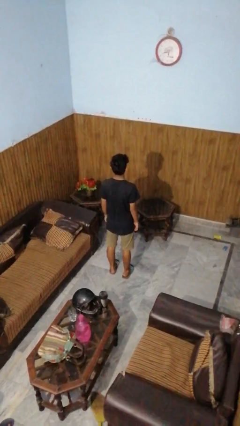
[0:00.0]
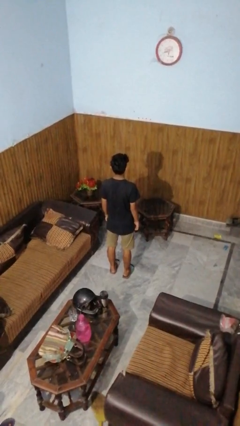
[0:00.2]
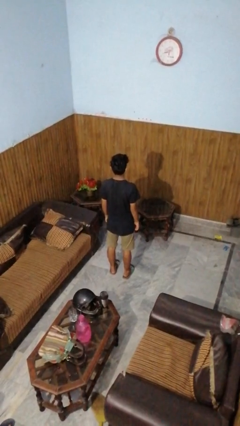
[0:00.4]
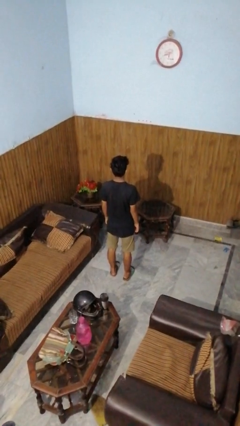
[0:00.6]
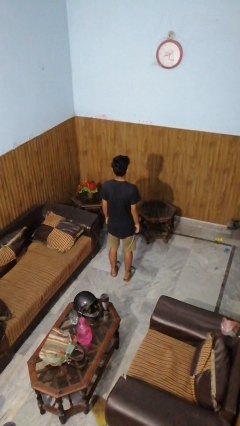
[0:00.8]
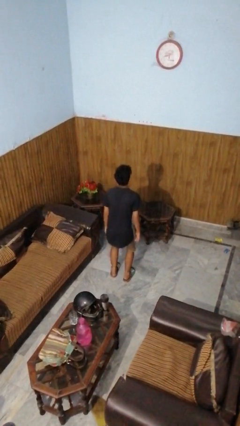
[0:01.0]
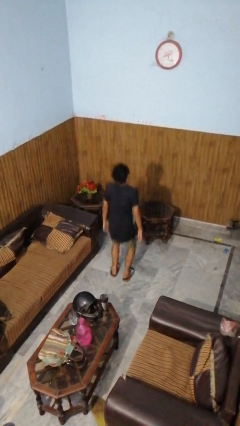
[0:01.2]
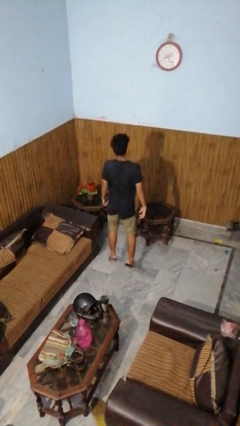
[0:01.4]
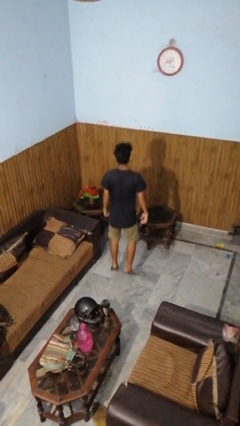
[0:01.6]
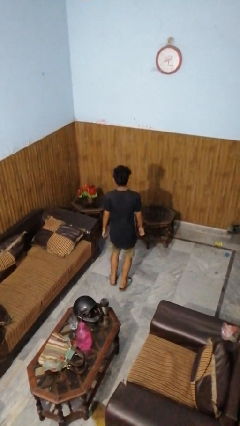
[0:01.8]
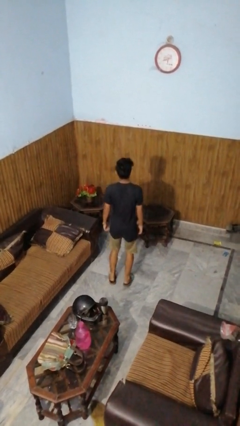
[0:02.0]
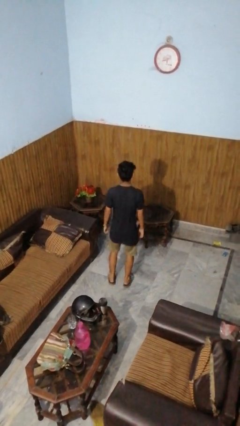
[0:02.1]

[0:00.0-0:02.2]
person jumps

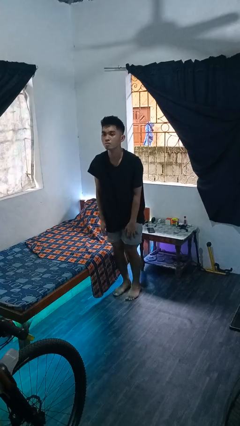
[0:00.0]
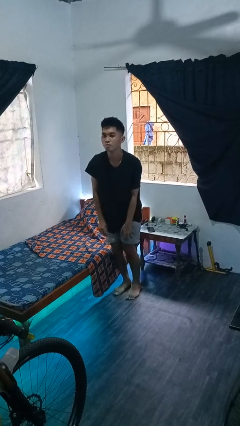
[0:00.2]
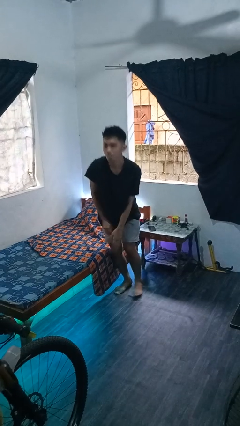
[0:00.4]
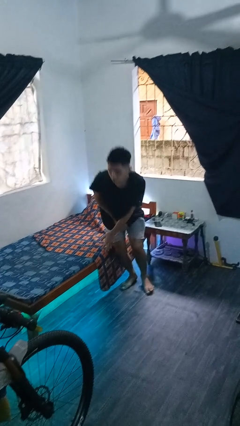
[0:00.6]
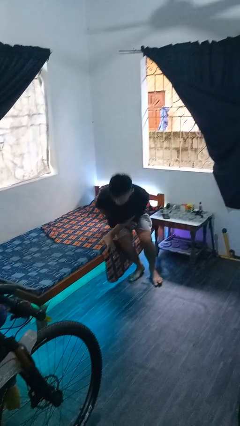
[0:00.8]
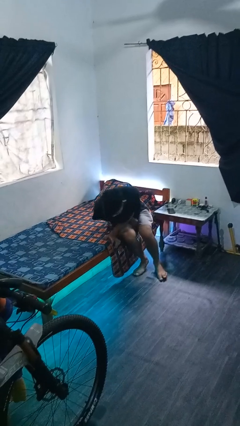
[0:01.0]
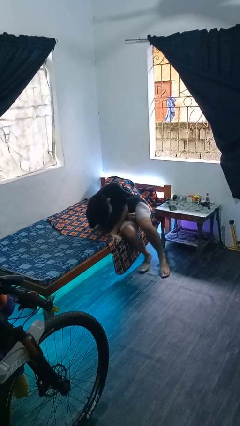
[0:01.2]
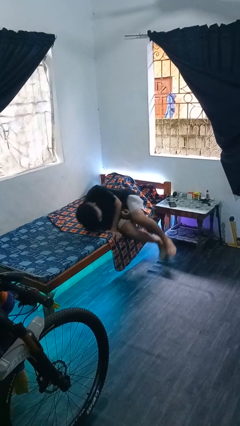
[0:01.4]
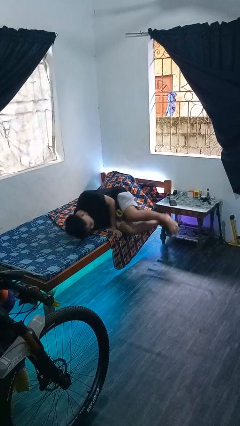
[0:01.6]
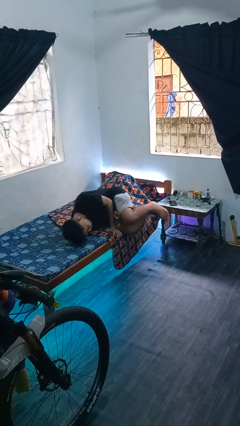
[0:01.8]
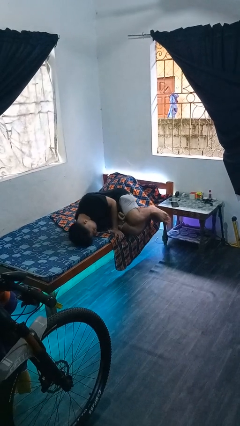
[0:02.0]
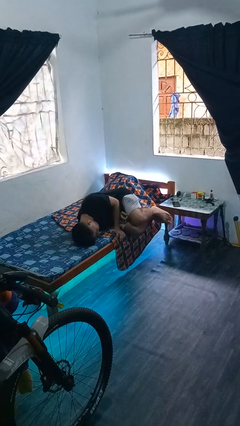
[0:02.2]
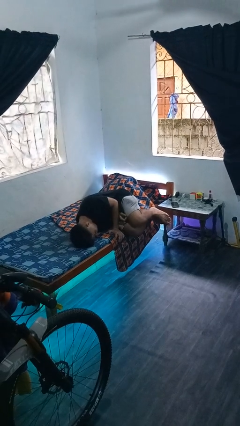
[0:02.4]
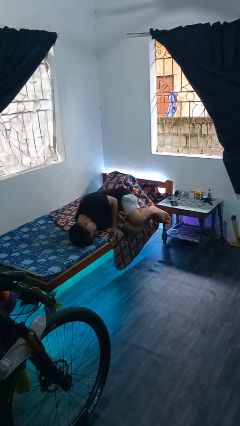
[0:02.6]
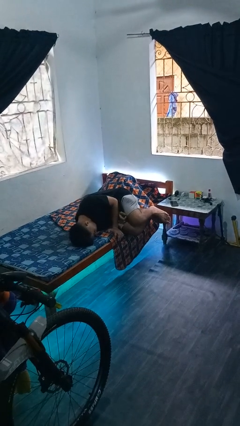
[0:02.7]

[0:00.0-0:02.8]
person lies down on bed

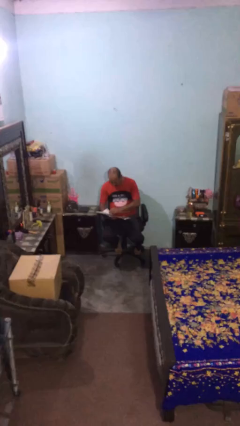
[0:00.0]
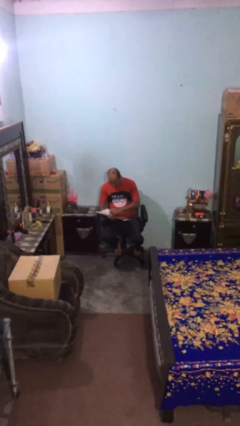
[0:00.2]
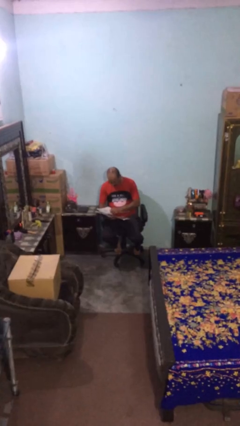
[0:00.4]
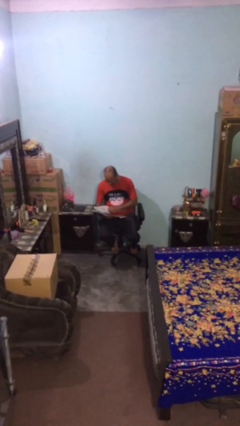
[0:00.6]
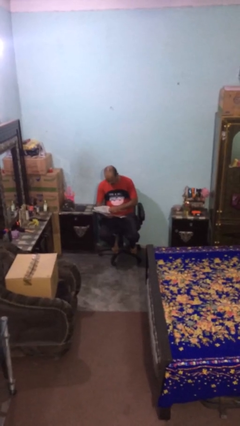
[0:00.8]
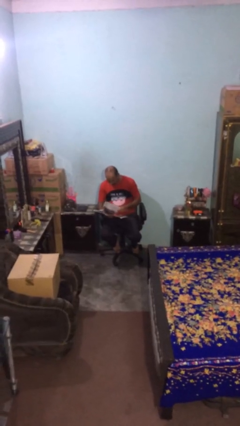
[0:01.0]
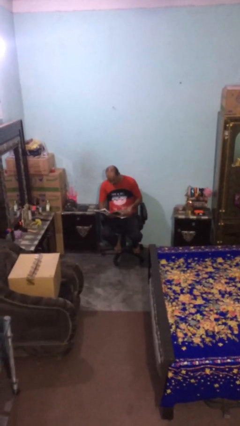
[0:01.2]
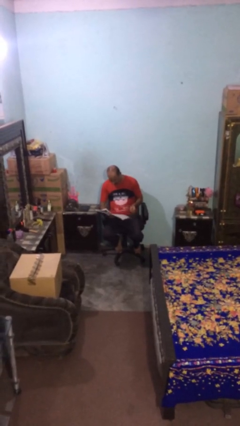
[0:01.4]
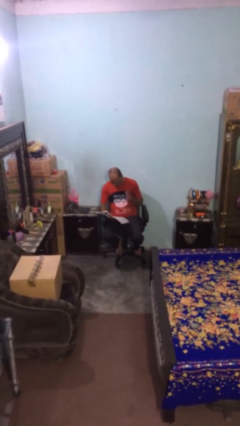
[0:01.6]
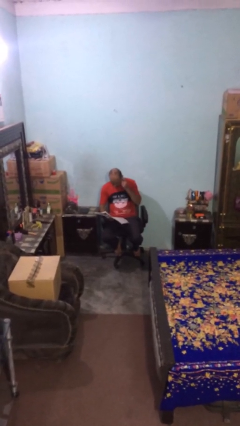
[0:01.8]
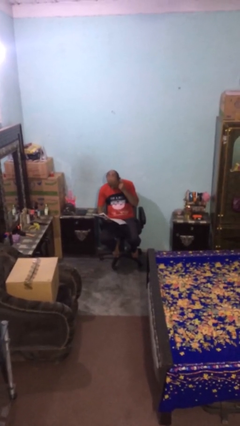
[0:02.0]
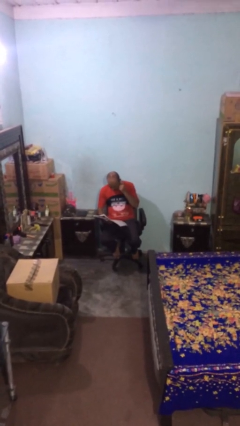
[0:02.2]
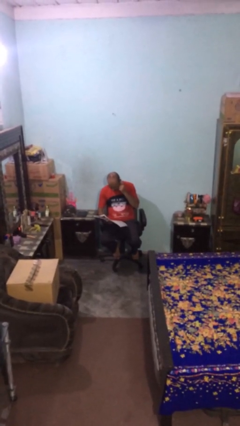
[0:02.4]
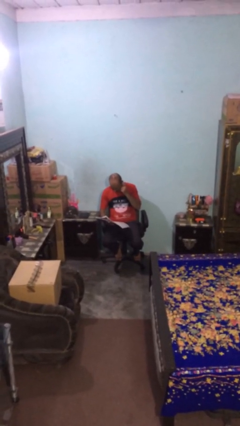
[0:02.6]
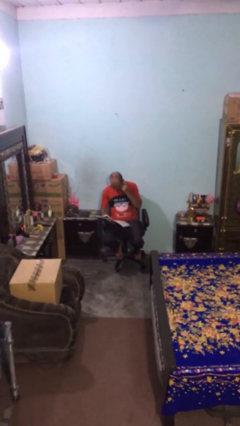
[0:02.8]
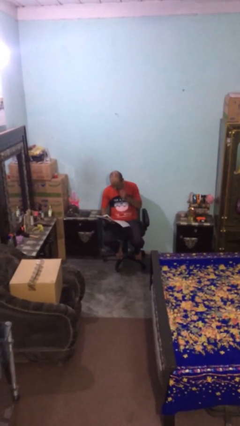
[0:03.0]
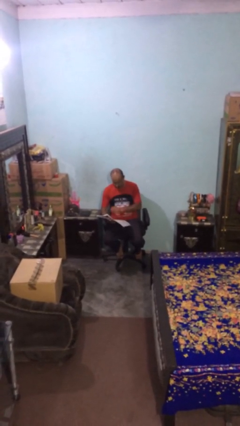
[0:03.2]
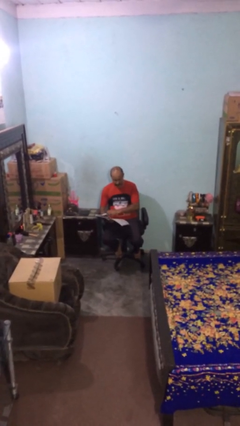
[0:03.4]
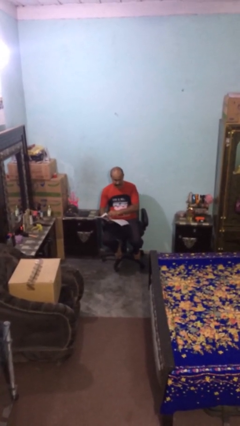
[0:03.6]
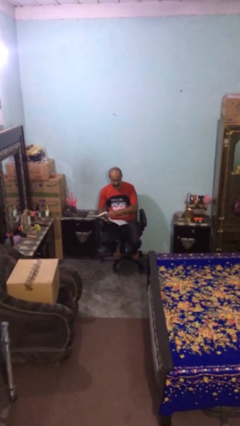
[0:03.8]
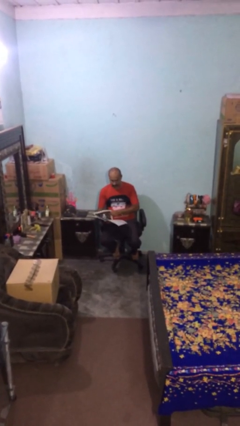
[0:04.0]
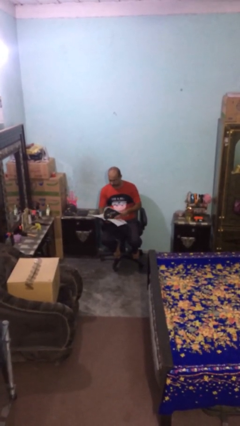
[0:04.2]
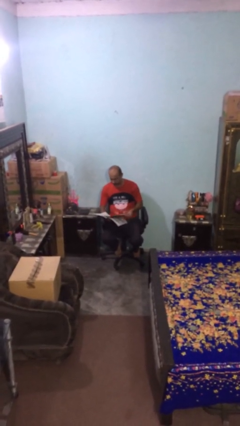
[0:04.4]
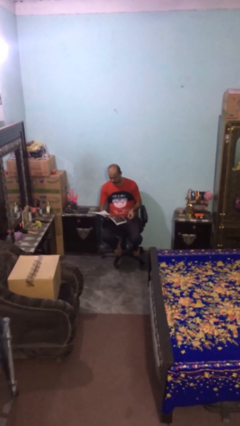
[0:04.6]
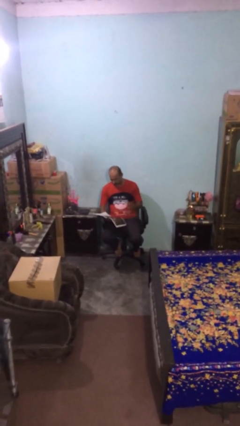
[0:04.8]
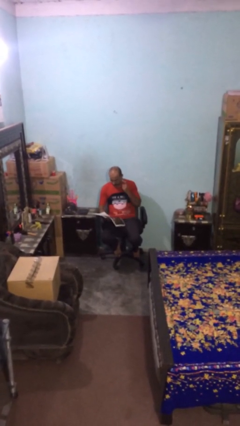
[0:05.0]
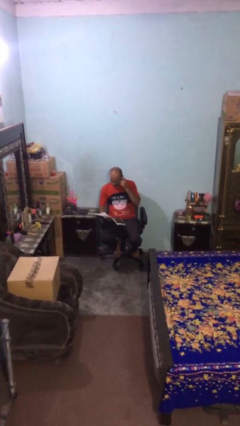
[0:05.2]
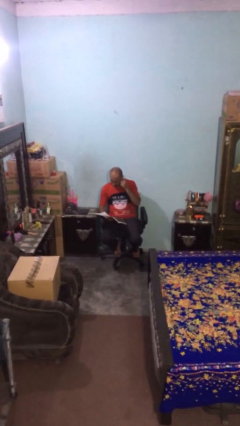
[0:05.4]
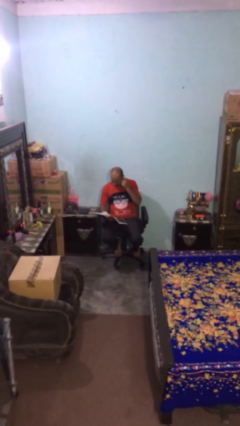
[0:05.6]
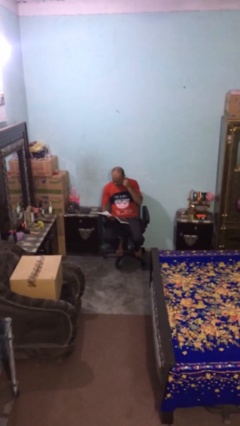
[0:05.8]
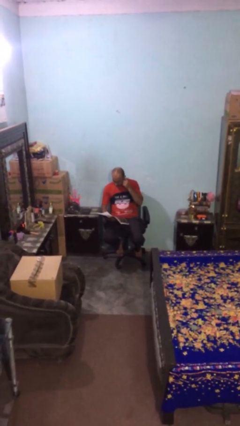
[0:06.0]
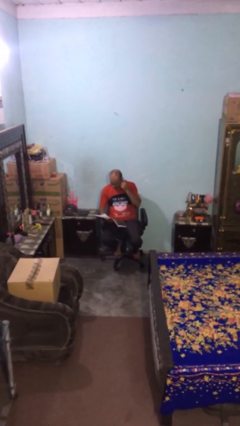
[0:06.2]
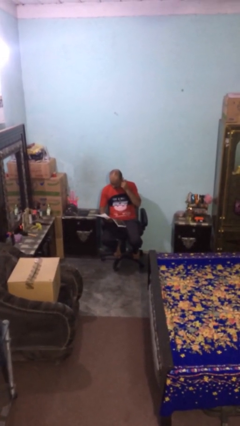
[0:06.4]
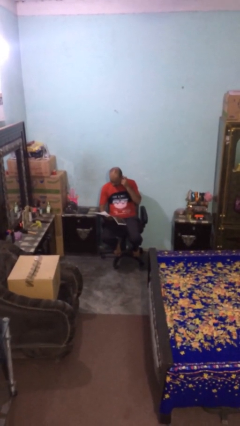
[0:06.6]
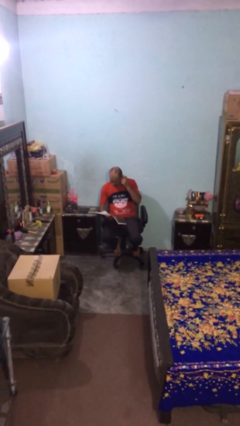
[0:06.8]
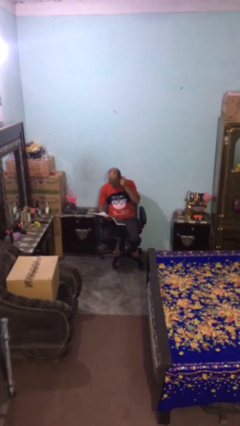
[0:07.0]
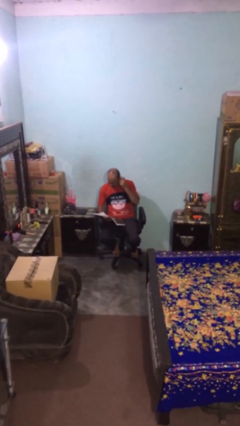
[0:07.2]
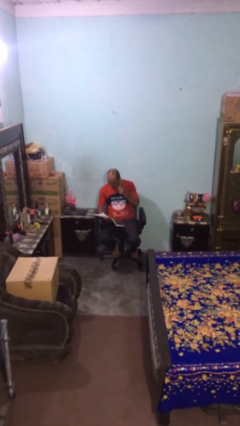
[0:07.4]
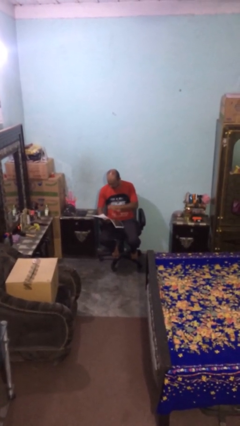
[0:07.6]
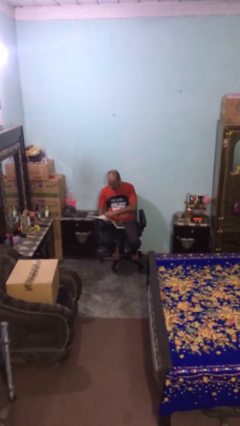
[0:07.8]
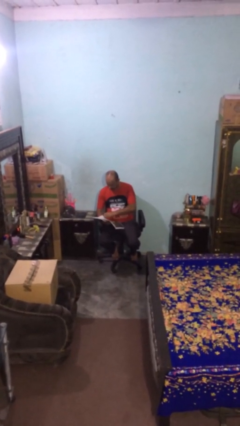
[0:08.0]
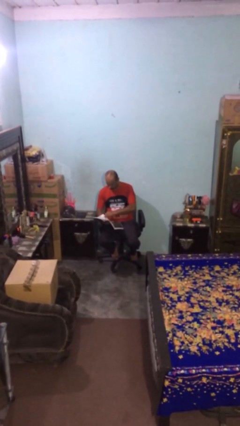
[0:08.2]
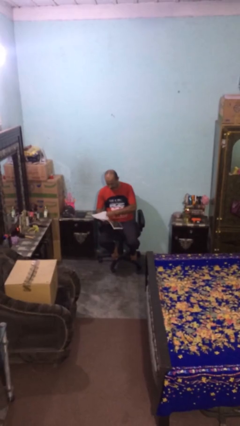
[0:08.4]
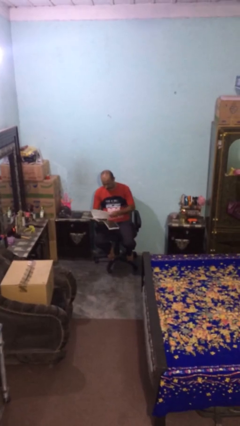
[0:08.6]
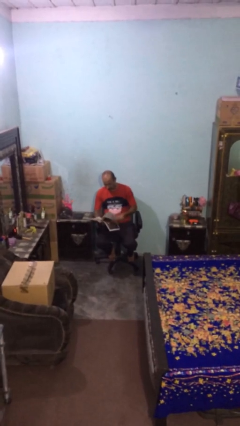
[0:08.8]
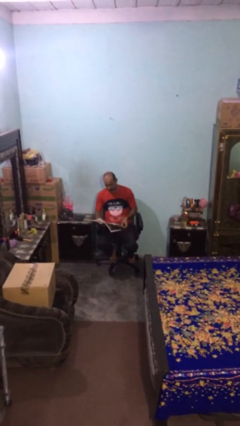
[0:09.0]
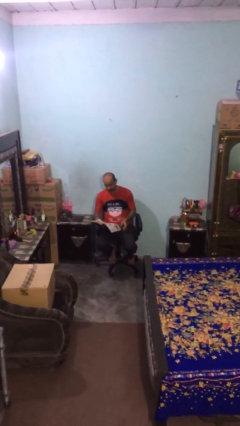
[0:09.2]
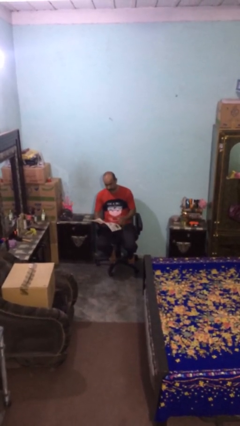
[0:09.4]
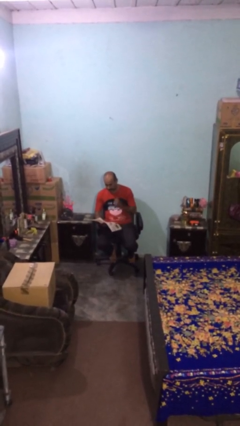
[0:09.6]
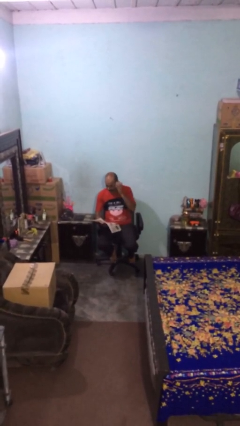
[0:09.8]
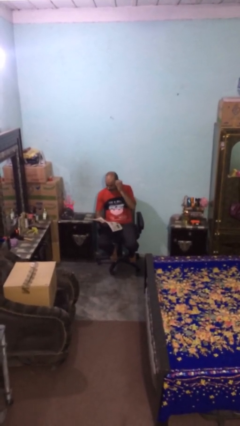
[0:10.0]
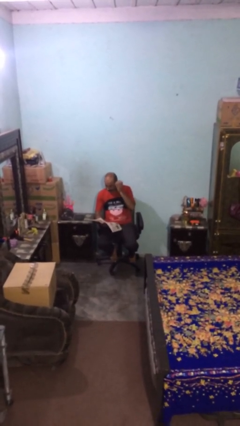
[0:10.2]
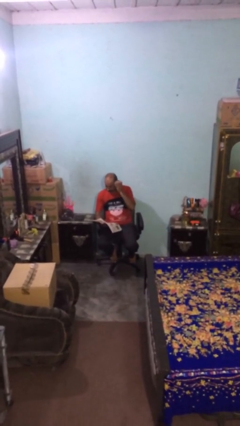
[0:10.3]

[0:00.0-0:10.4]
person reads document

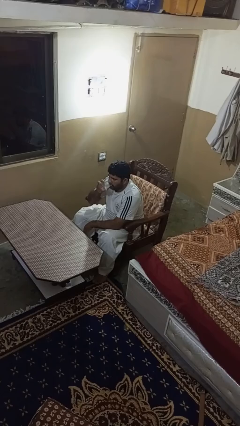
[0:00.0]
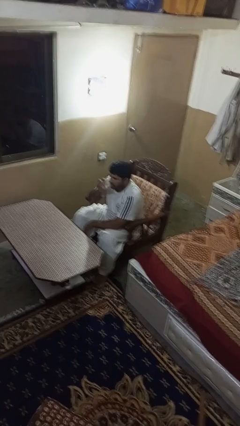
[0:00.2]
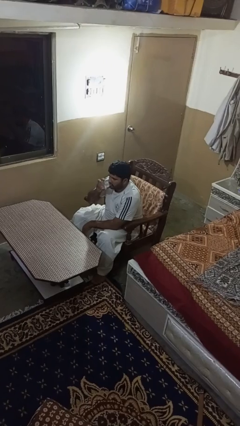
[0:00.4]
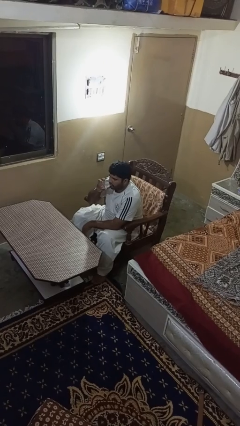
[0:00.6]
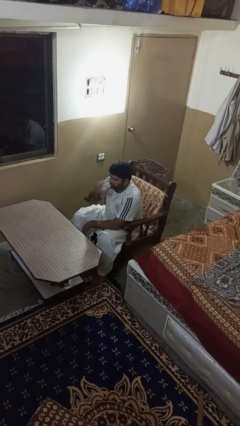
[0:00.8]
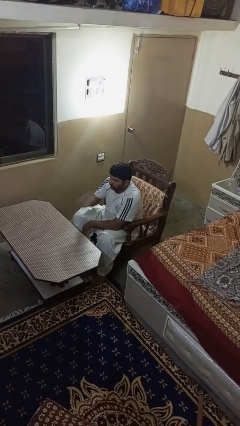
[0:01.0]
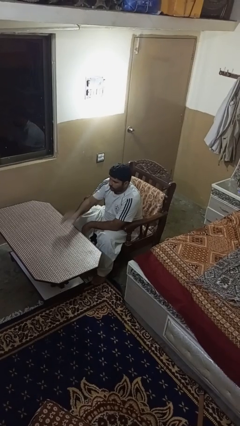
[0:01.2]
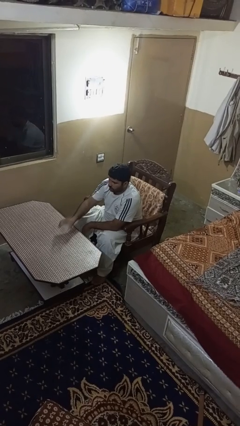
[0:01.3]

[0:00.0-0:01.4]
person puts down object on table

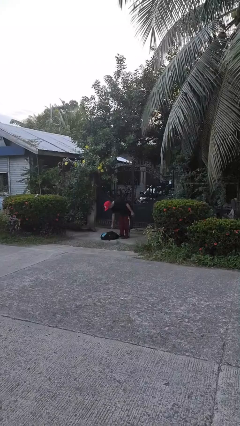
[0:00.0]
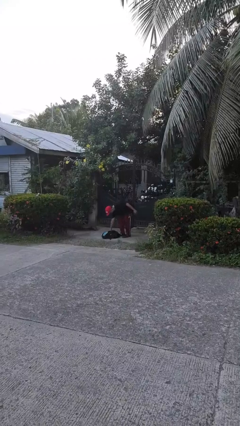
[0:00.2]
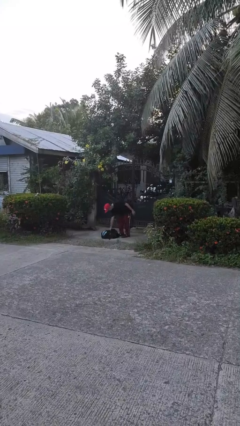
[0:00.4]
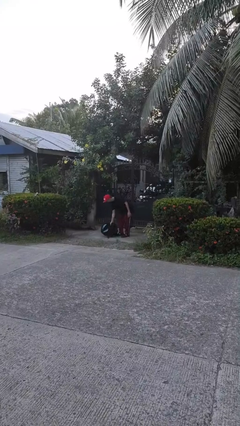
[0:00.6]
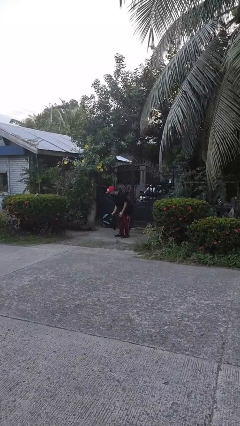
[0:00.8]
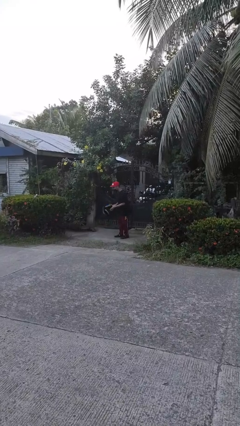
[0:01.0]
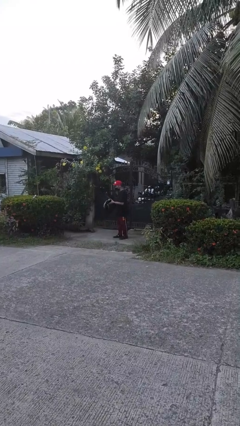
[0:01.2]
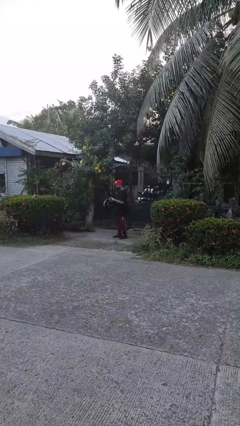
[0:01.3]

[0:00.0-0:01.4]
person picks up object from floor
